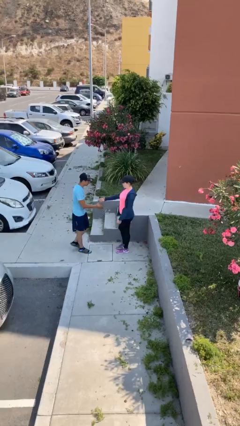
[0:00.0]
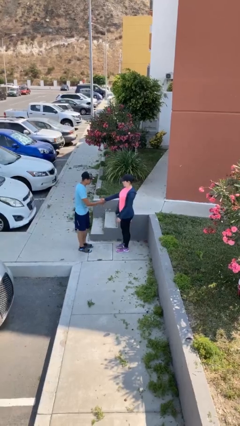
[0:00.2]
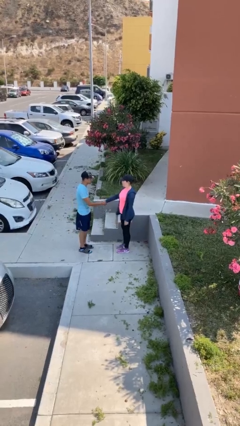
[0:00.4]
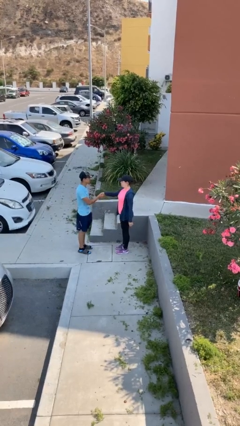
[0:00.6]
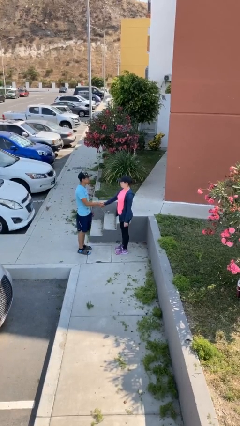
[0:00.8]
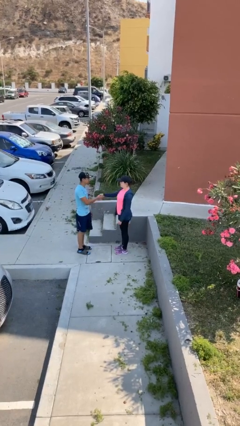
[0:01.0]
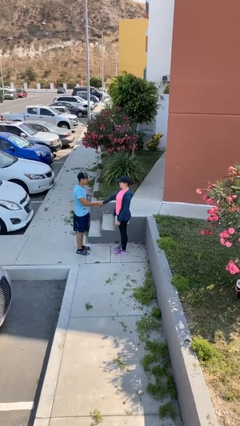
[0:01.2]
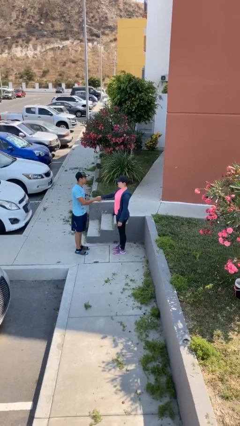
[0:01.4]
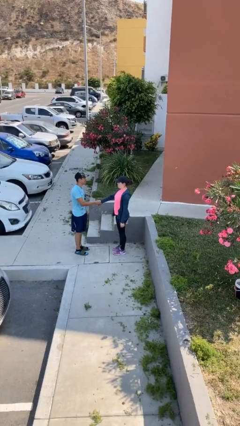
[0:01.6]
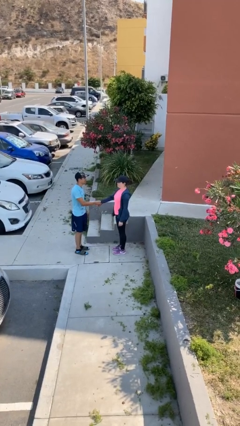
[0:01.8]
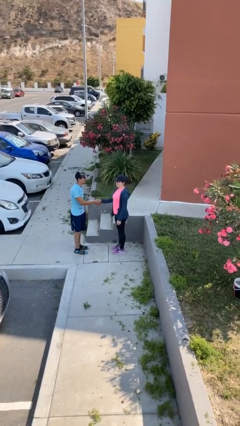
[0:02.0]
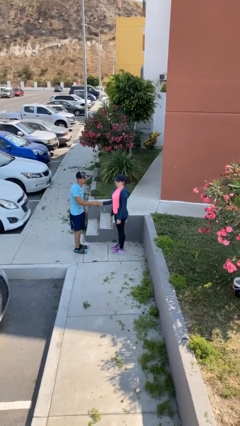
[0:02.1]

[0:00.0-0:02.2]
person shakes hand

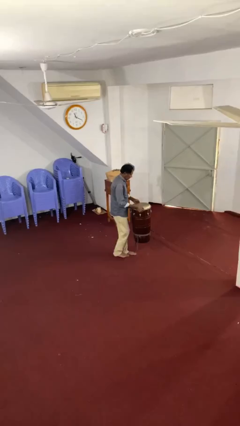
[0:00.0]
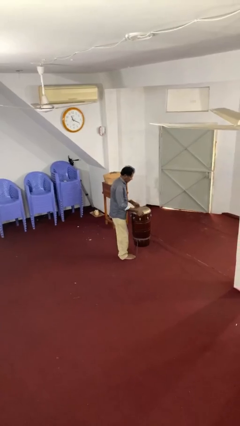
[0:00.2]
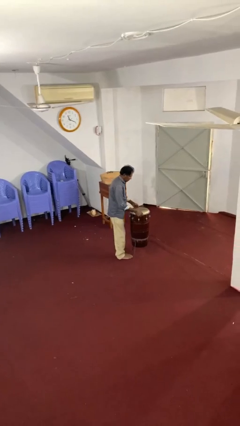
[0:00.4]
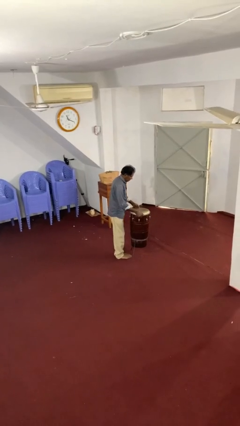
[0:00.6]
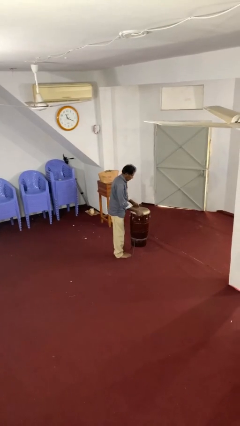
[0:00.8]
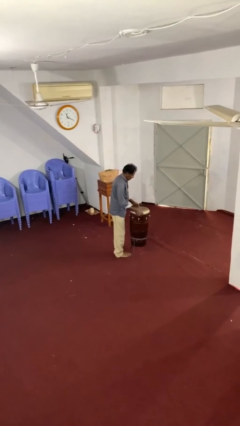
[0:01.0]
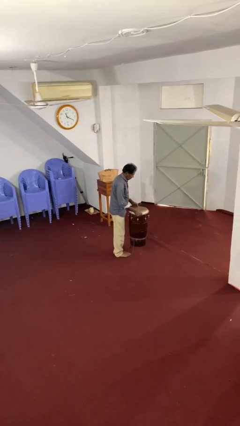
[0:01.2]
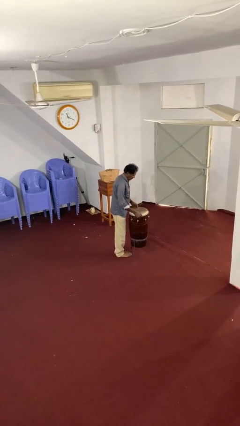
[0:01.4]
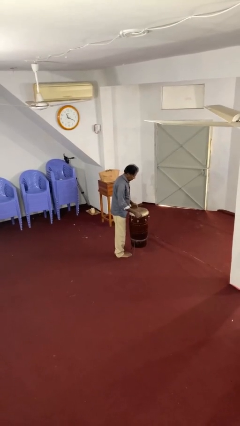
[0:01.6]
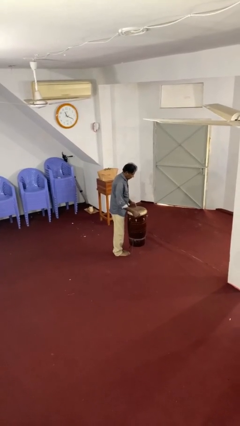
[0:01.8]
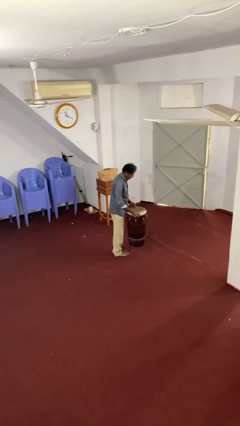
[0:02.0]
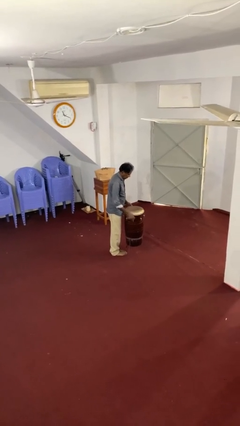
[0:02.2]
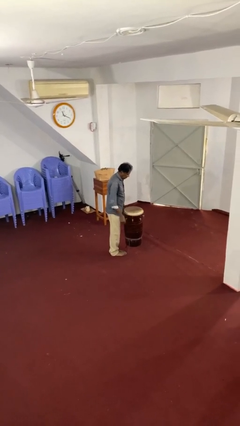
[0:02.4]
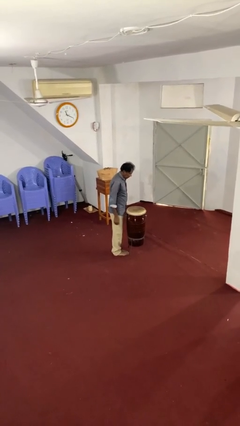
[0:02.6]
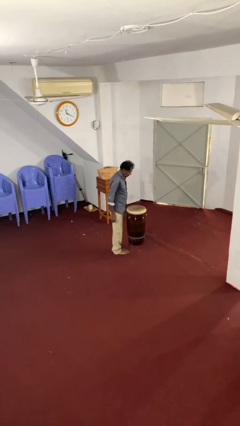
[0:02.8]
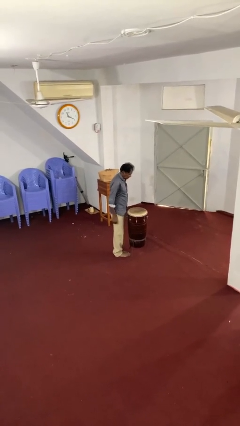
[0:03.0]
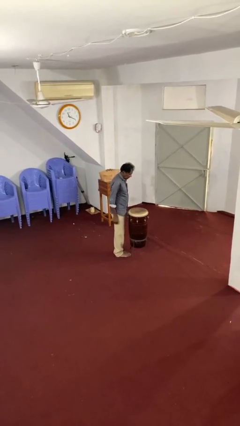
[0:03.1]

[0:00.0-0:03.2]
person puts down object on floor

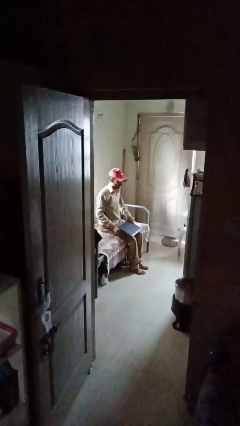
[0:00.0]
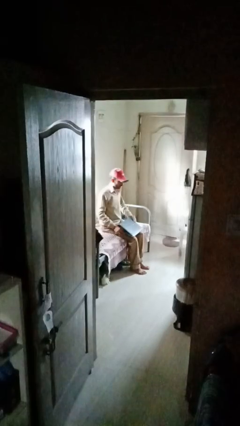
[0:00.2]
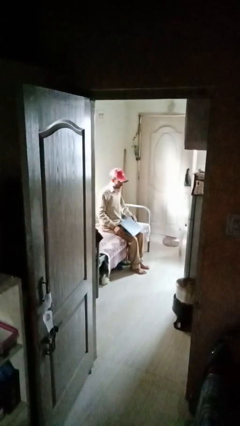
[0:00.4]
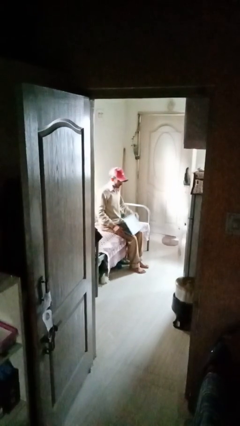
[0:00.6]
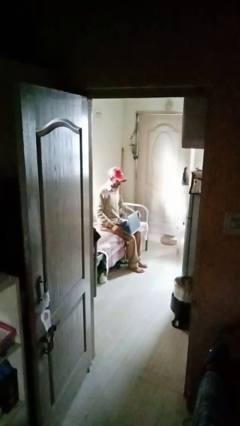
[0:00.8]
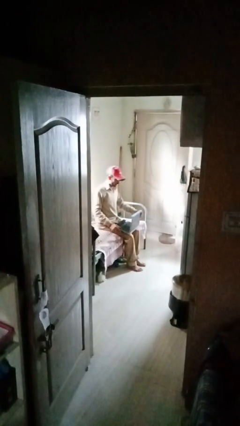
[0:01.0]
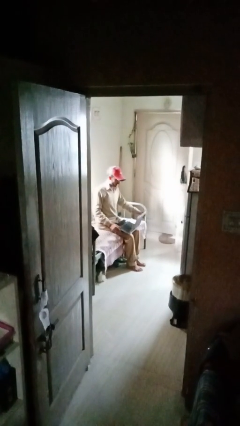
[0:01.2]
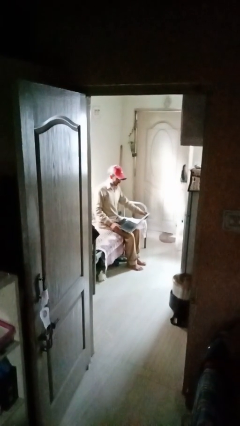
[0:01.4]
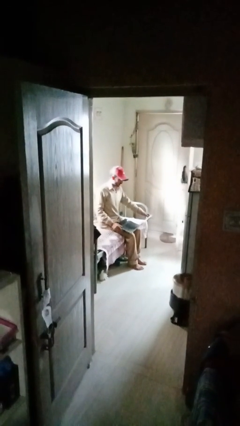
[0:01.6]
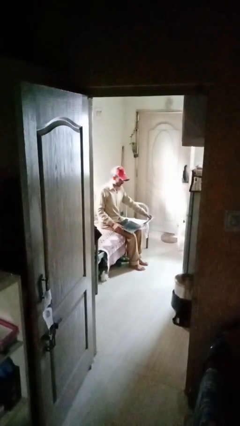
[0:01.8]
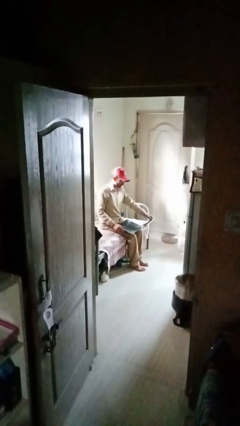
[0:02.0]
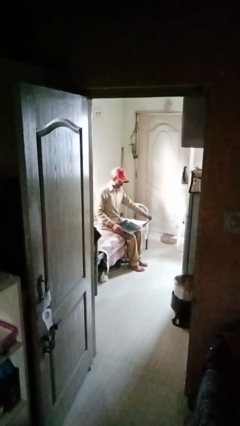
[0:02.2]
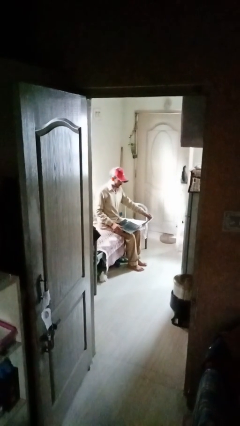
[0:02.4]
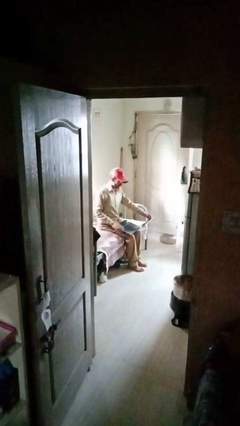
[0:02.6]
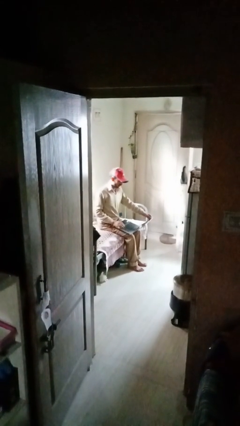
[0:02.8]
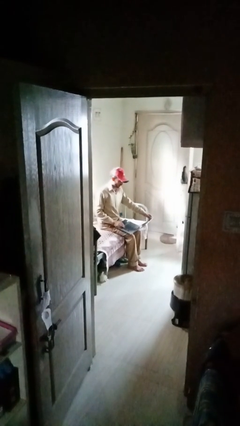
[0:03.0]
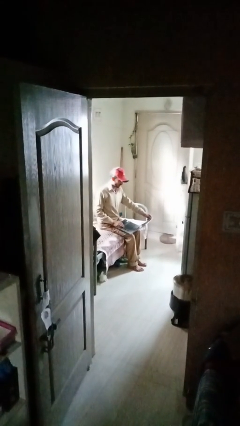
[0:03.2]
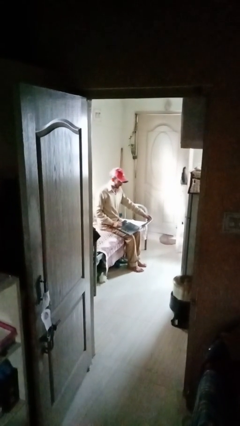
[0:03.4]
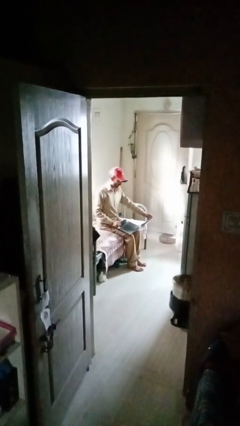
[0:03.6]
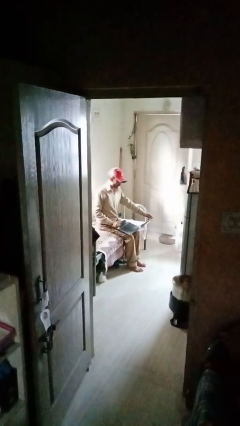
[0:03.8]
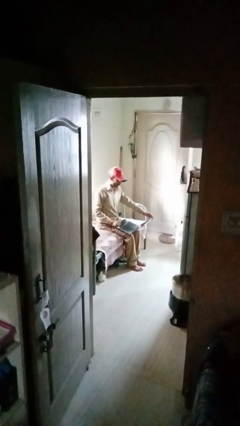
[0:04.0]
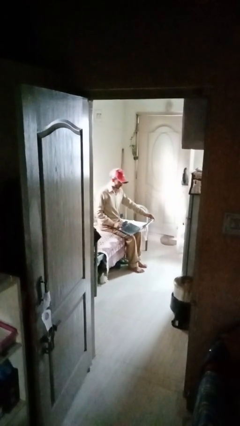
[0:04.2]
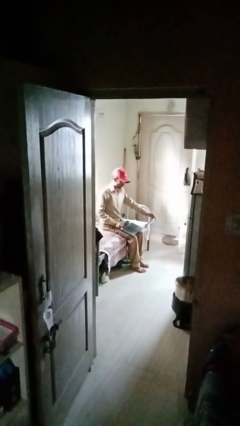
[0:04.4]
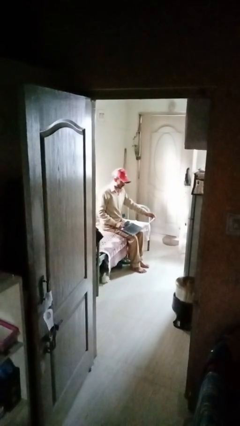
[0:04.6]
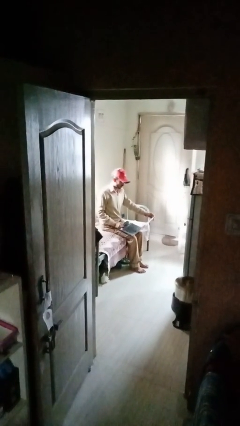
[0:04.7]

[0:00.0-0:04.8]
person opens laptop

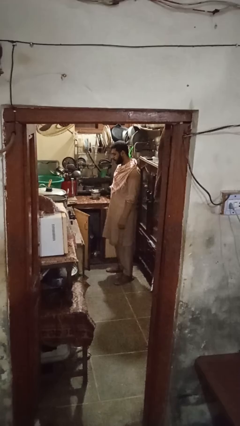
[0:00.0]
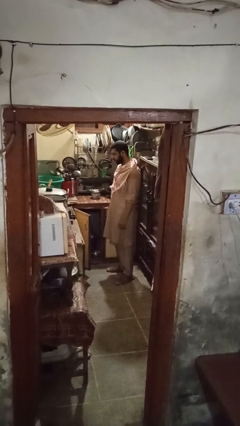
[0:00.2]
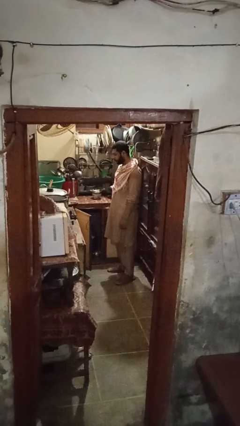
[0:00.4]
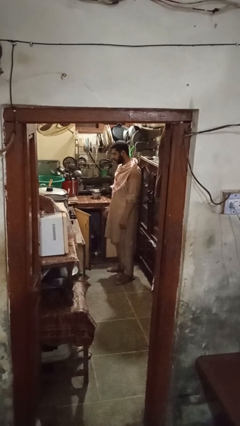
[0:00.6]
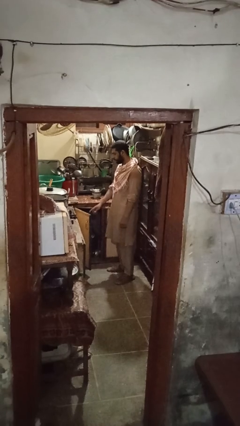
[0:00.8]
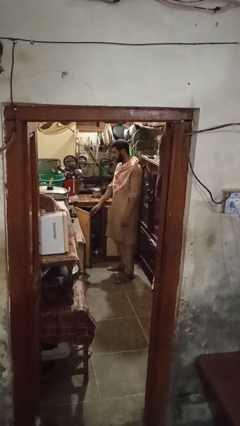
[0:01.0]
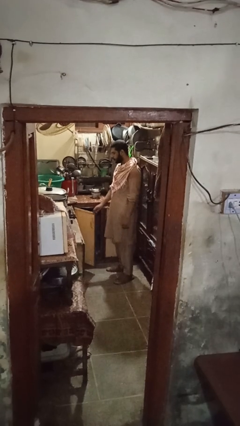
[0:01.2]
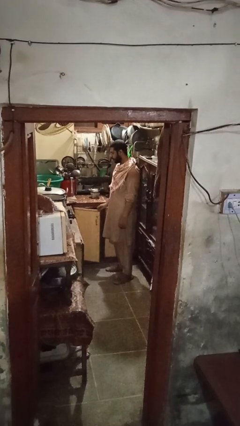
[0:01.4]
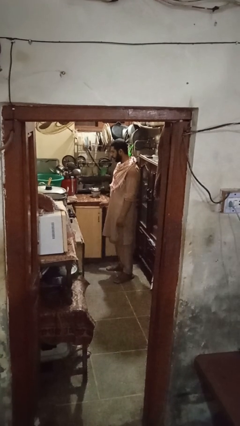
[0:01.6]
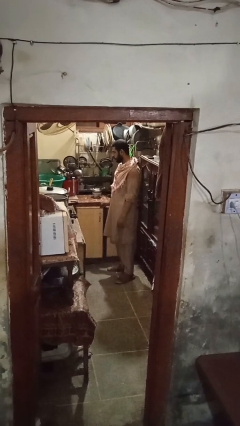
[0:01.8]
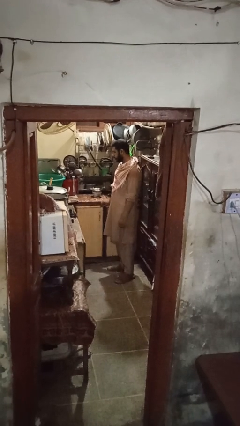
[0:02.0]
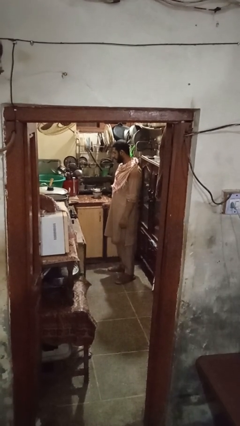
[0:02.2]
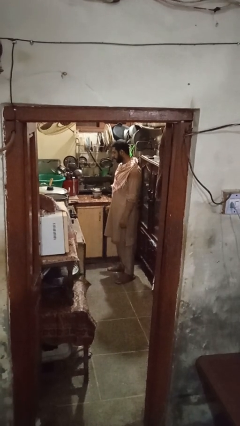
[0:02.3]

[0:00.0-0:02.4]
person closes cabinet

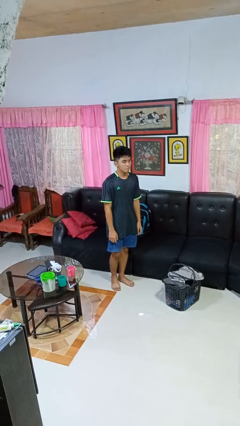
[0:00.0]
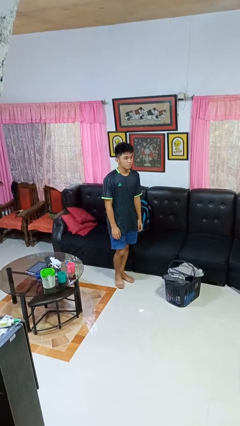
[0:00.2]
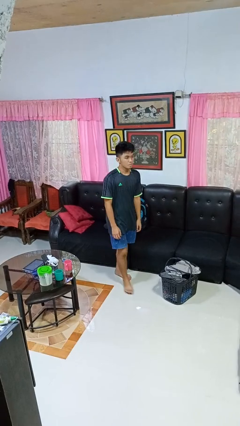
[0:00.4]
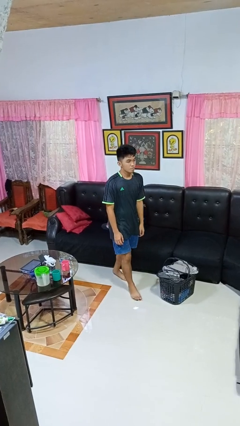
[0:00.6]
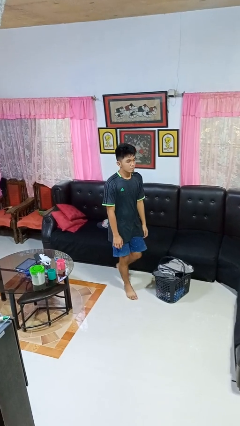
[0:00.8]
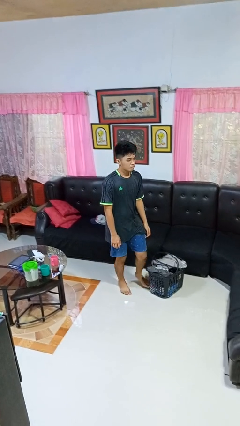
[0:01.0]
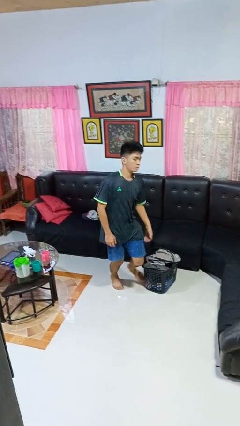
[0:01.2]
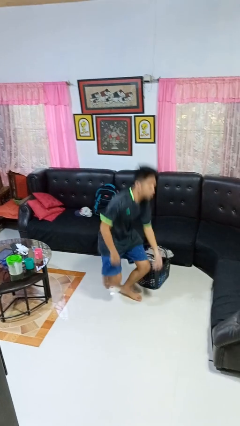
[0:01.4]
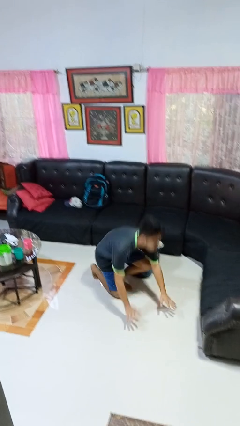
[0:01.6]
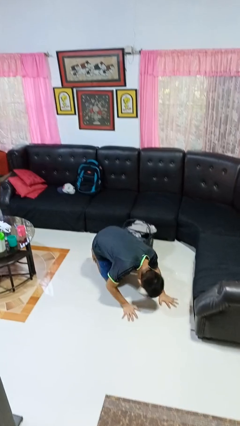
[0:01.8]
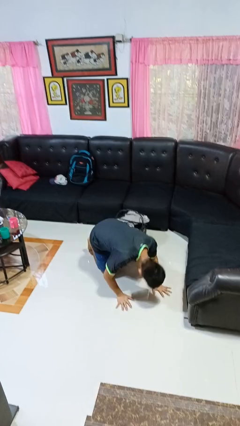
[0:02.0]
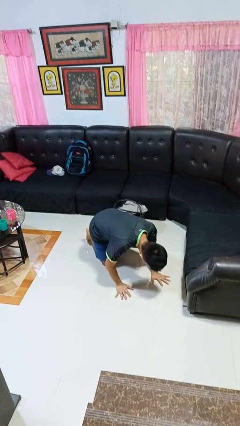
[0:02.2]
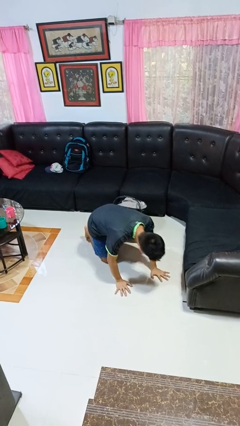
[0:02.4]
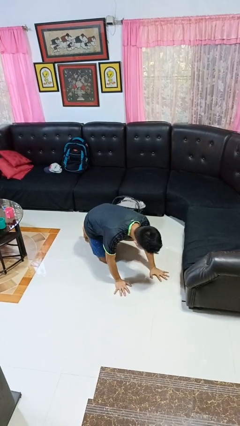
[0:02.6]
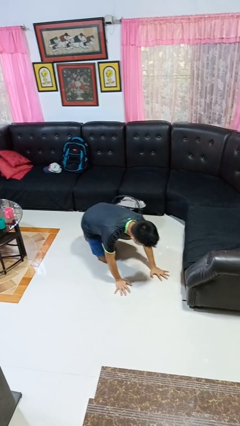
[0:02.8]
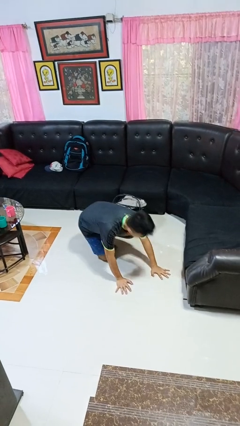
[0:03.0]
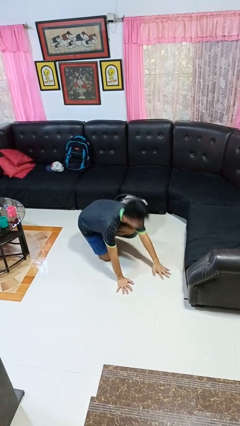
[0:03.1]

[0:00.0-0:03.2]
person trips on object on floor

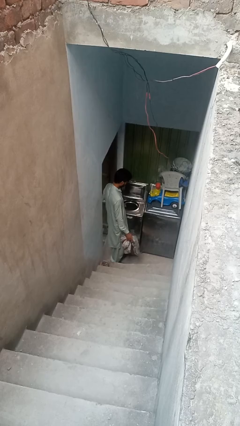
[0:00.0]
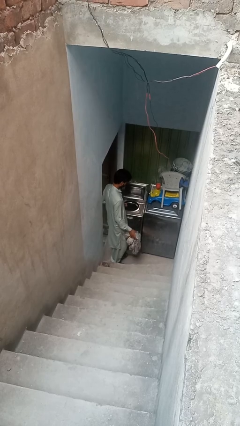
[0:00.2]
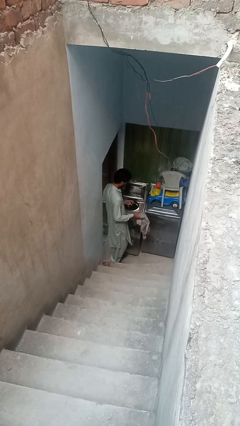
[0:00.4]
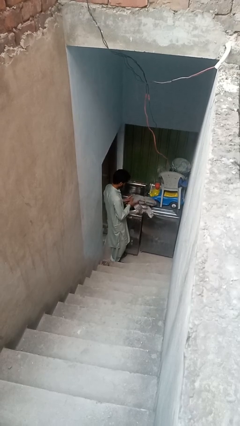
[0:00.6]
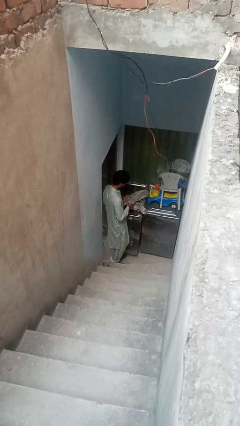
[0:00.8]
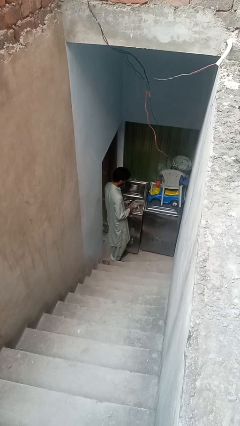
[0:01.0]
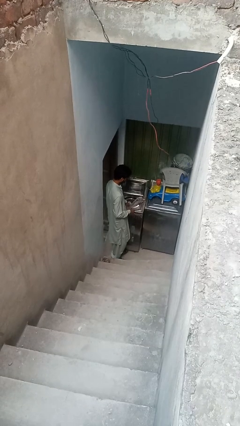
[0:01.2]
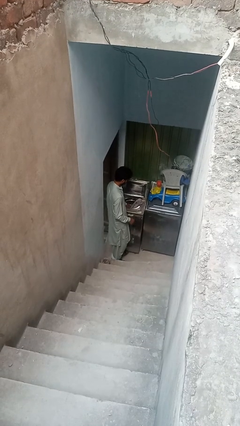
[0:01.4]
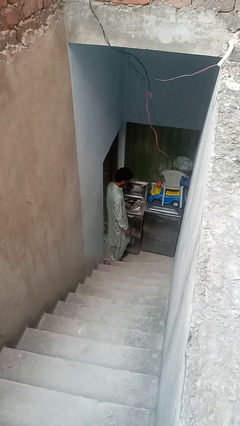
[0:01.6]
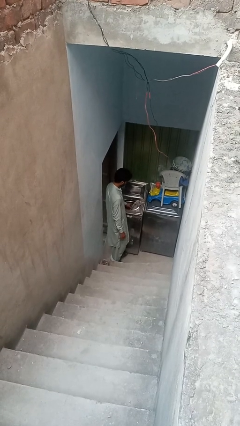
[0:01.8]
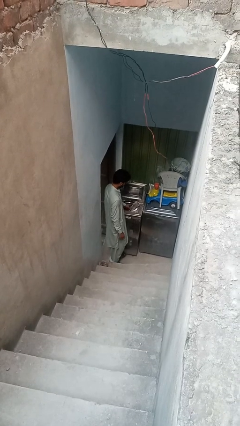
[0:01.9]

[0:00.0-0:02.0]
person loads clotheswasher
